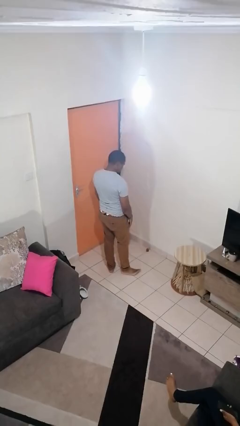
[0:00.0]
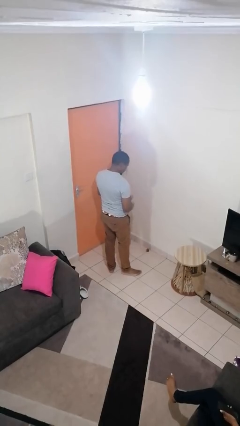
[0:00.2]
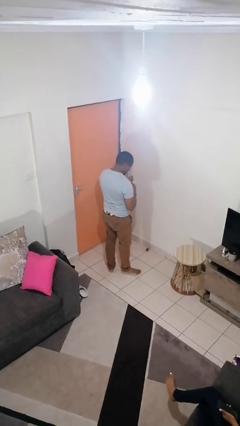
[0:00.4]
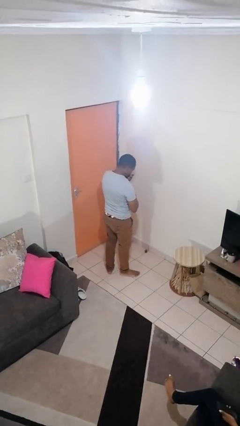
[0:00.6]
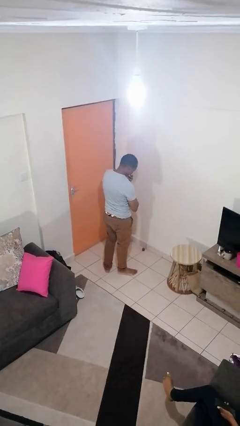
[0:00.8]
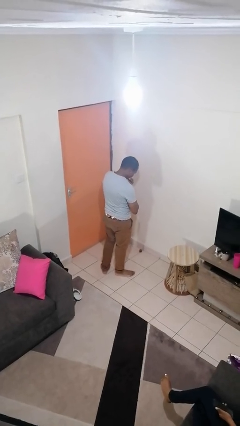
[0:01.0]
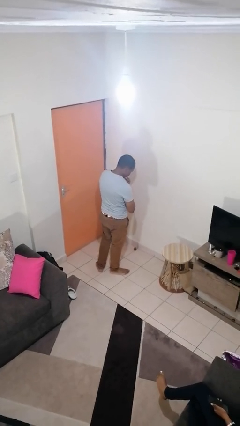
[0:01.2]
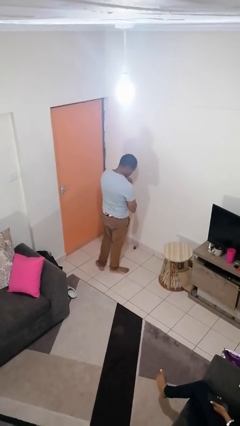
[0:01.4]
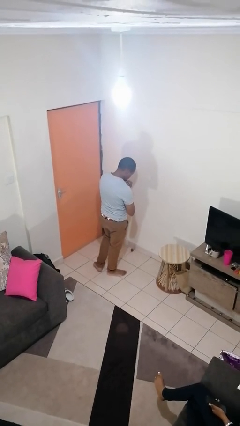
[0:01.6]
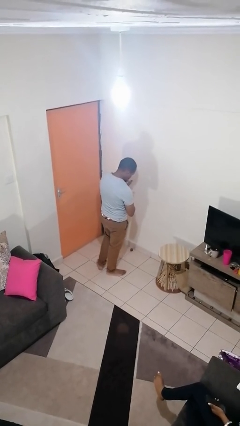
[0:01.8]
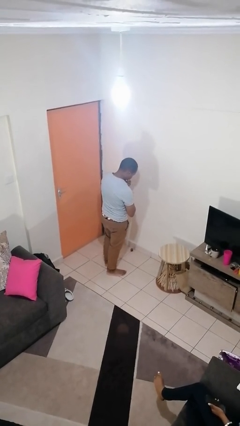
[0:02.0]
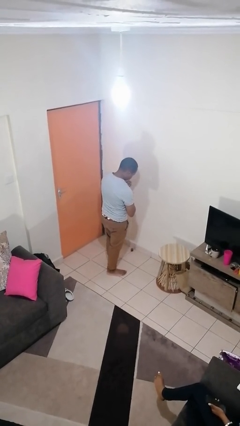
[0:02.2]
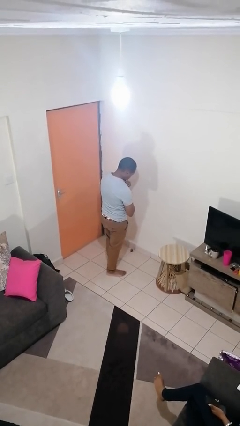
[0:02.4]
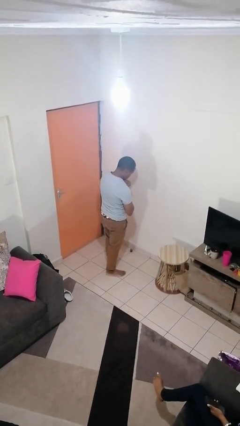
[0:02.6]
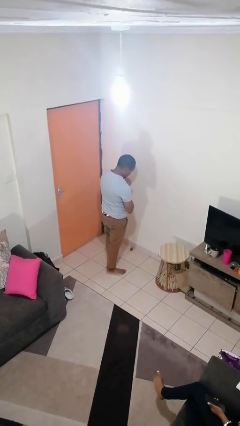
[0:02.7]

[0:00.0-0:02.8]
person strokes chin

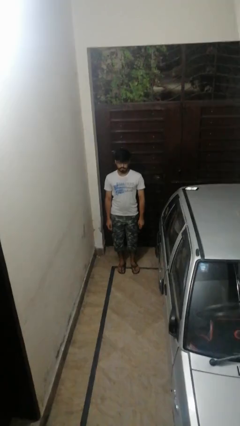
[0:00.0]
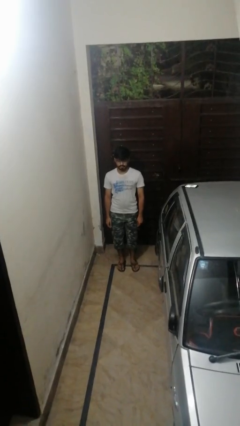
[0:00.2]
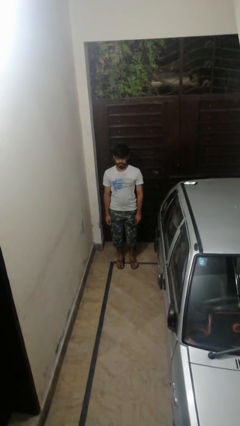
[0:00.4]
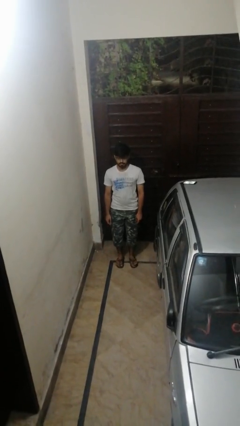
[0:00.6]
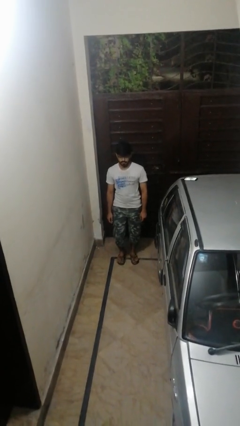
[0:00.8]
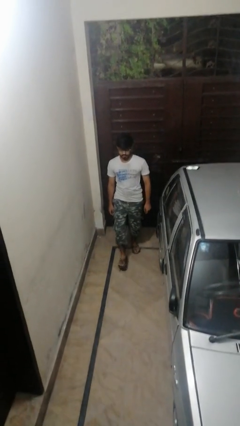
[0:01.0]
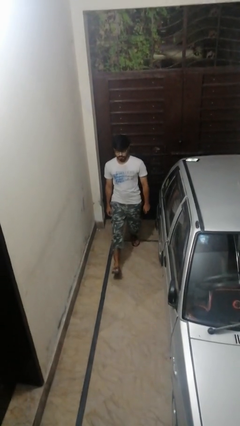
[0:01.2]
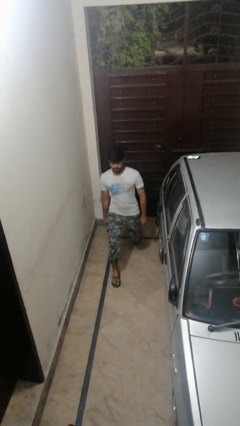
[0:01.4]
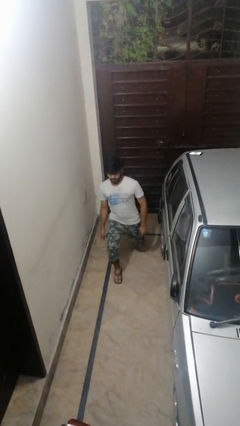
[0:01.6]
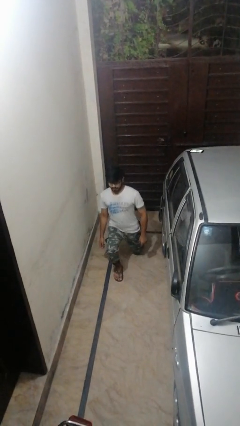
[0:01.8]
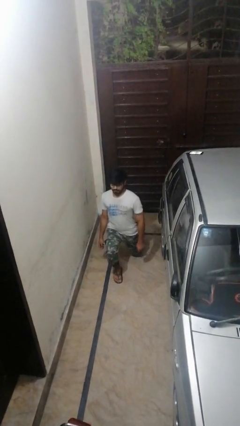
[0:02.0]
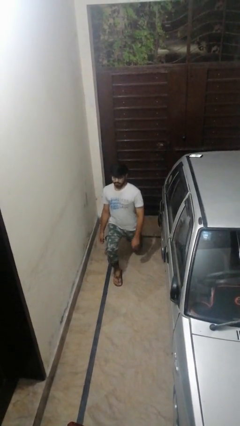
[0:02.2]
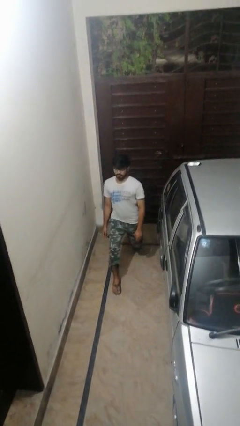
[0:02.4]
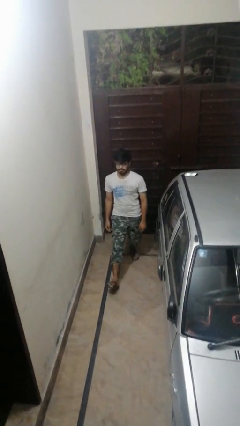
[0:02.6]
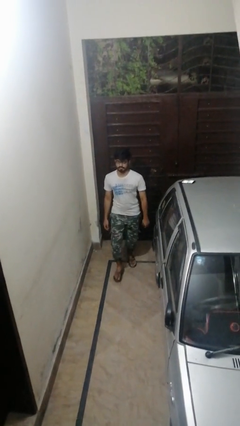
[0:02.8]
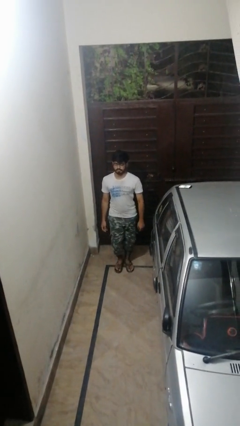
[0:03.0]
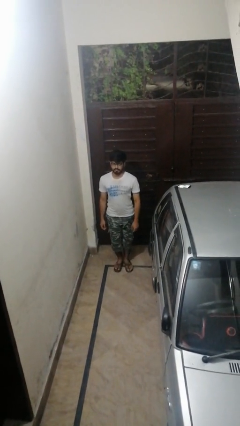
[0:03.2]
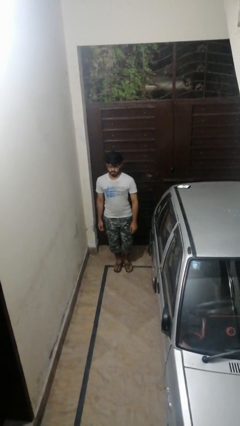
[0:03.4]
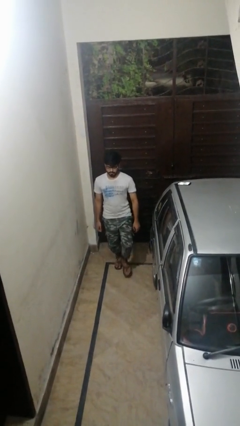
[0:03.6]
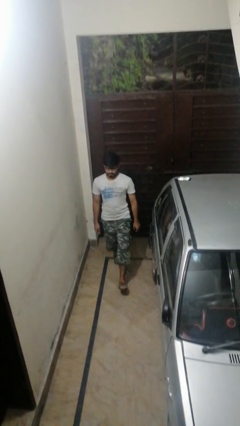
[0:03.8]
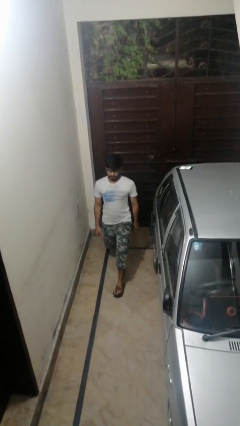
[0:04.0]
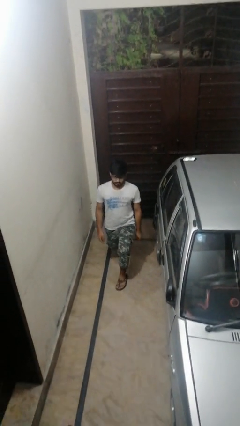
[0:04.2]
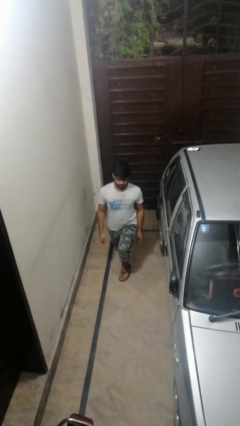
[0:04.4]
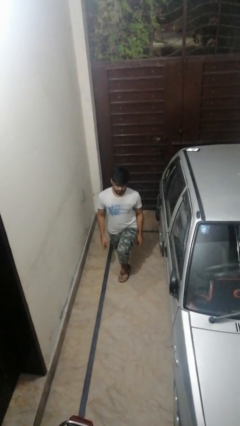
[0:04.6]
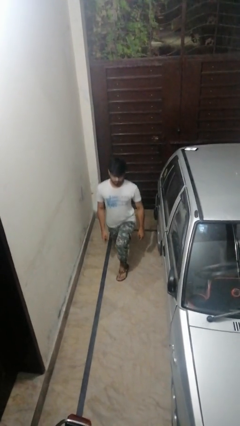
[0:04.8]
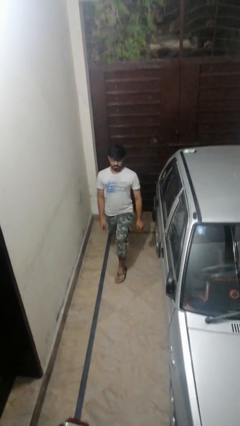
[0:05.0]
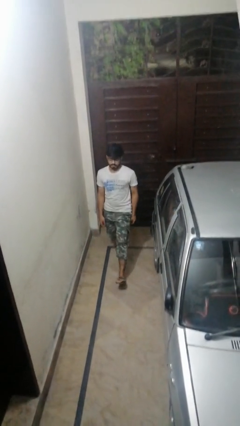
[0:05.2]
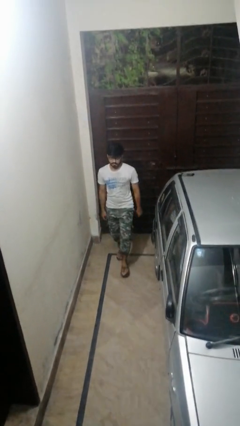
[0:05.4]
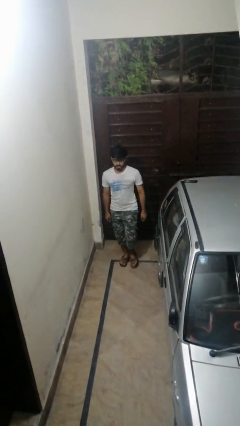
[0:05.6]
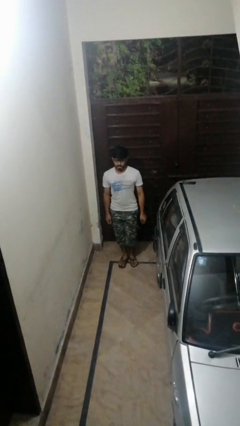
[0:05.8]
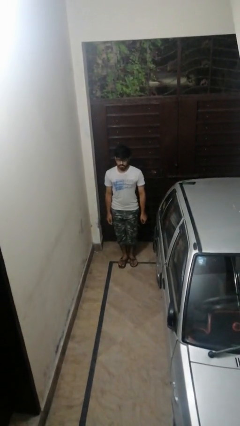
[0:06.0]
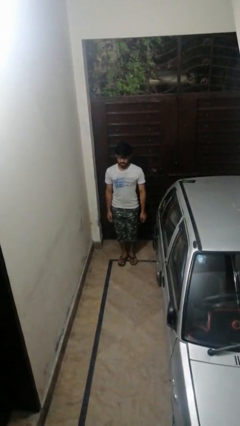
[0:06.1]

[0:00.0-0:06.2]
person exercises with lunges

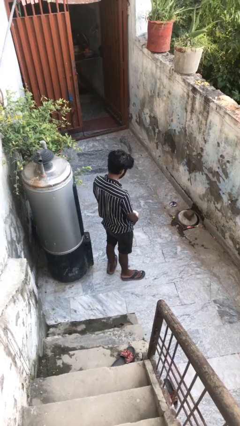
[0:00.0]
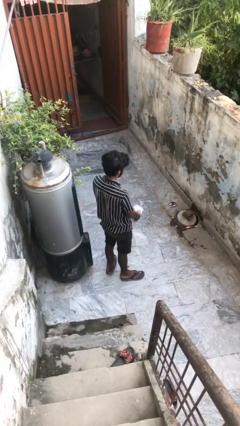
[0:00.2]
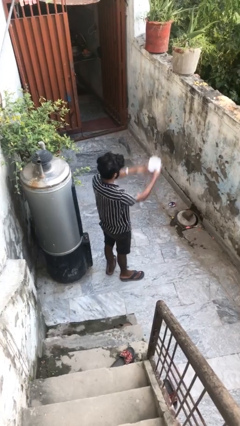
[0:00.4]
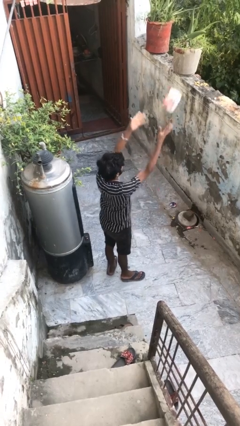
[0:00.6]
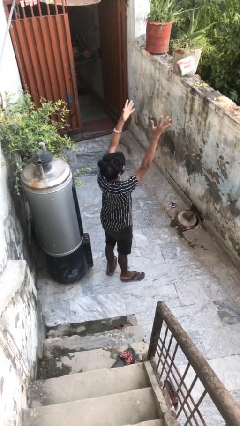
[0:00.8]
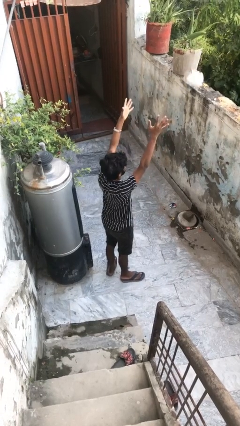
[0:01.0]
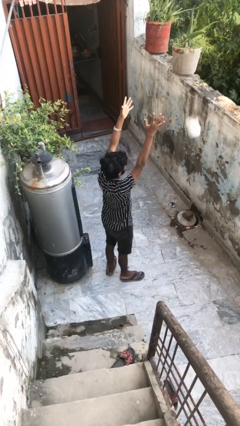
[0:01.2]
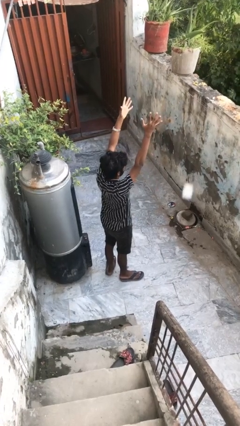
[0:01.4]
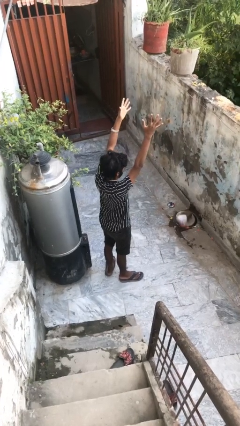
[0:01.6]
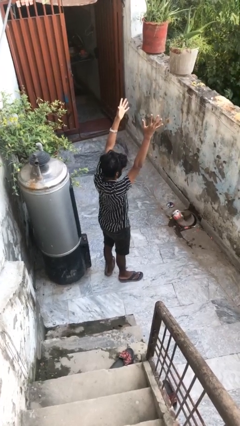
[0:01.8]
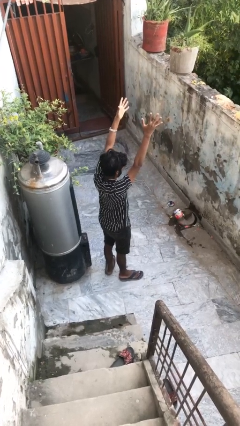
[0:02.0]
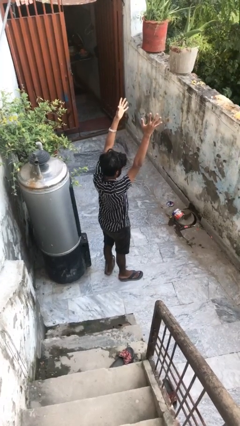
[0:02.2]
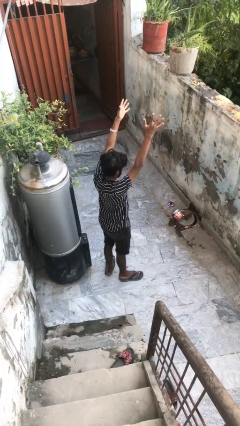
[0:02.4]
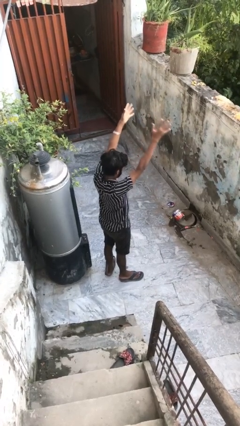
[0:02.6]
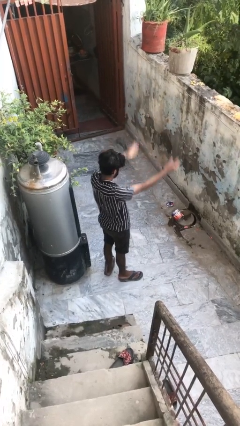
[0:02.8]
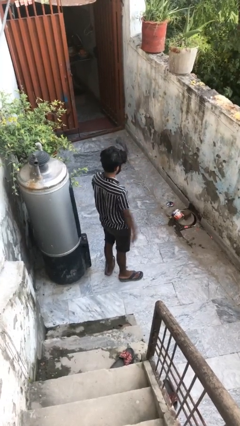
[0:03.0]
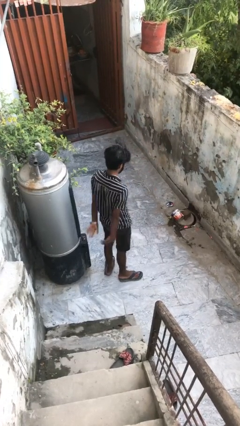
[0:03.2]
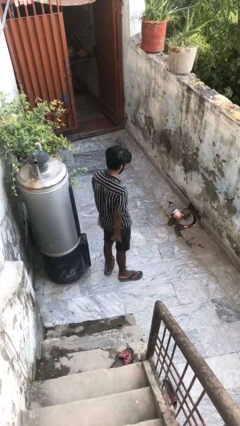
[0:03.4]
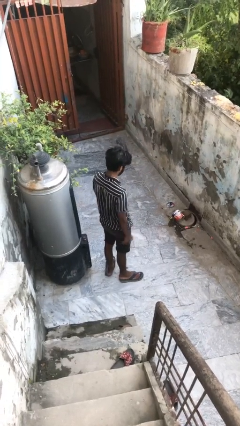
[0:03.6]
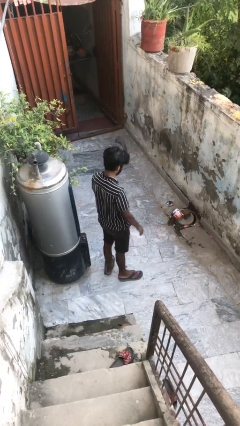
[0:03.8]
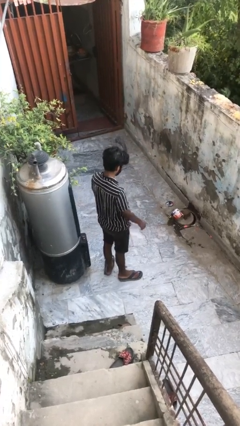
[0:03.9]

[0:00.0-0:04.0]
person throws object into air

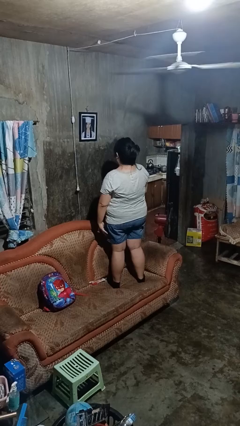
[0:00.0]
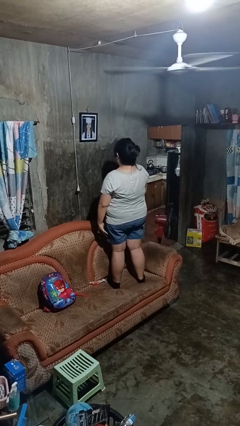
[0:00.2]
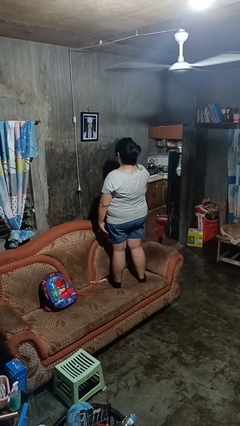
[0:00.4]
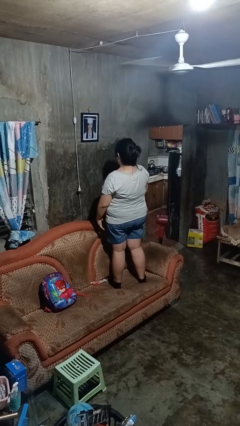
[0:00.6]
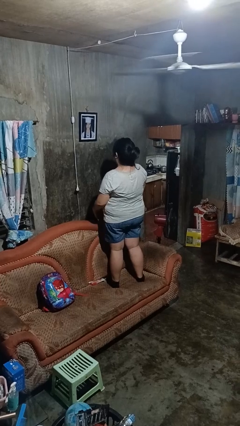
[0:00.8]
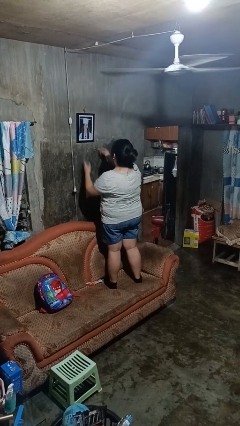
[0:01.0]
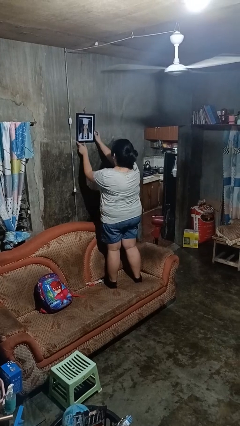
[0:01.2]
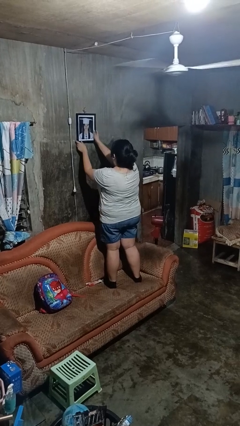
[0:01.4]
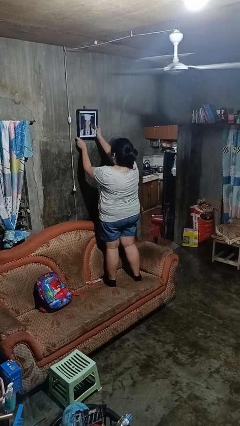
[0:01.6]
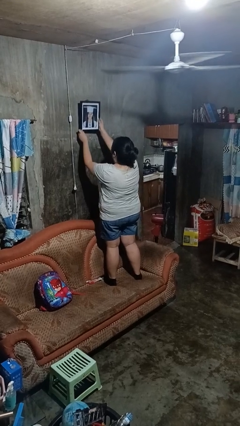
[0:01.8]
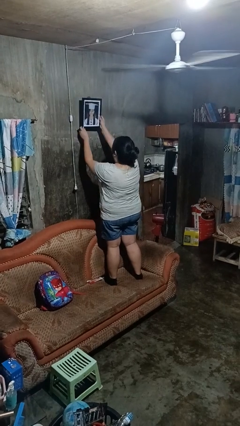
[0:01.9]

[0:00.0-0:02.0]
person takes down picture frame

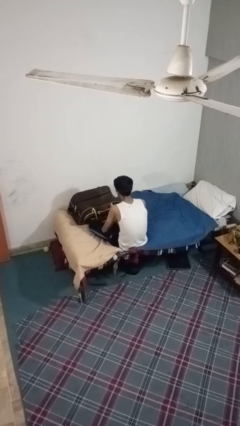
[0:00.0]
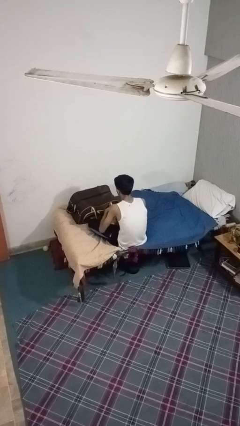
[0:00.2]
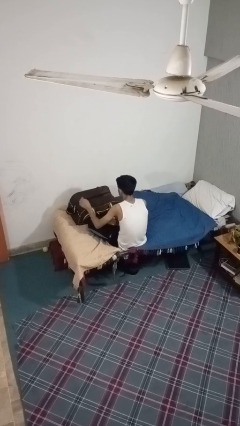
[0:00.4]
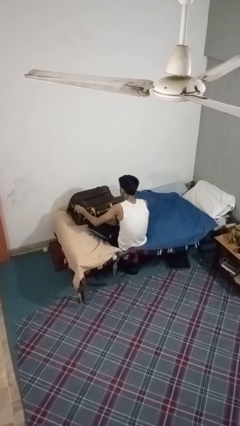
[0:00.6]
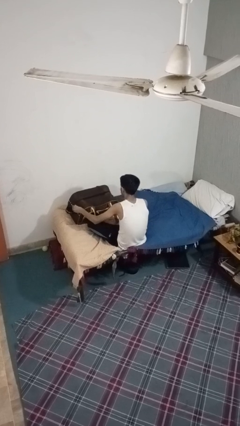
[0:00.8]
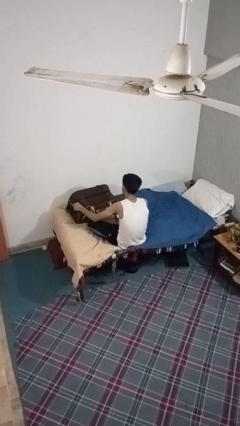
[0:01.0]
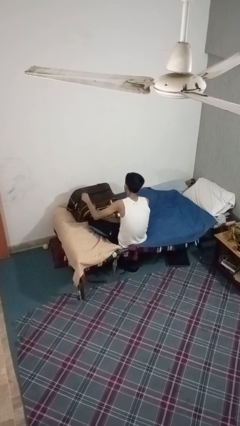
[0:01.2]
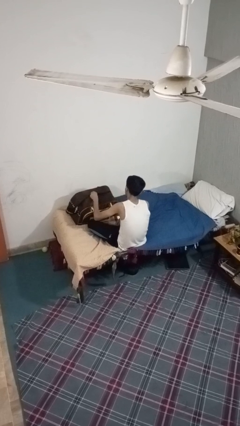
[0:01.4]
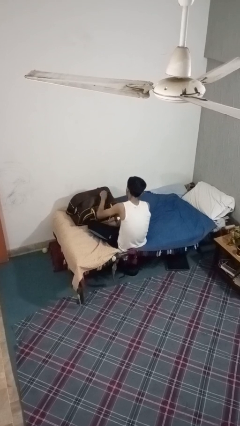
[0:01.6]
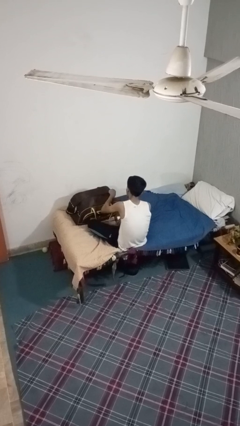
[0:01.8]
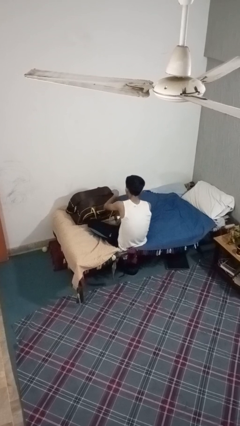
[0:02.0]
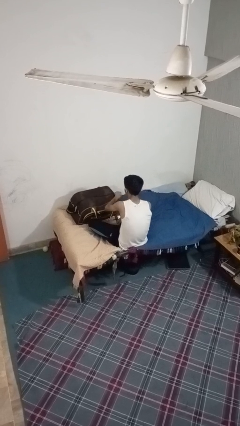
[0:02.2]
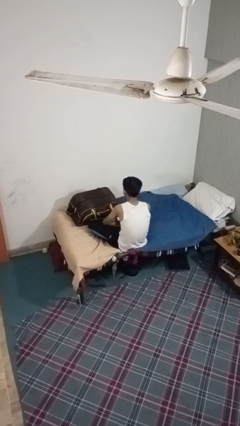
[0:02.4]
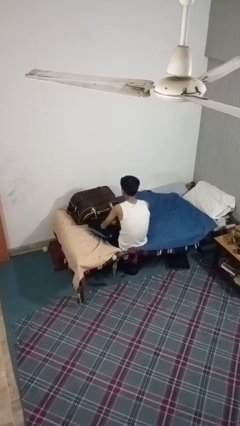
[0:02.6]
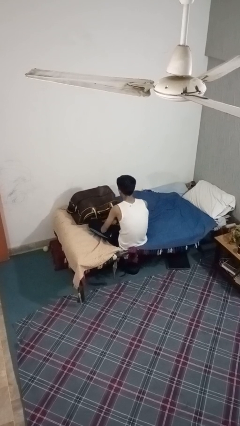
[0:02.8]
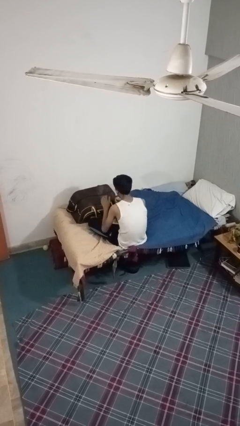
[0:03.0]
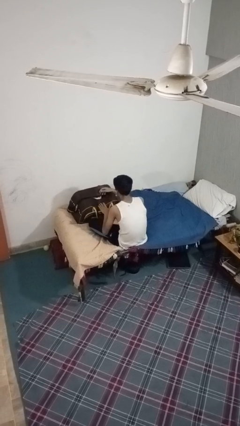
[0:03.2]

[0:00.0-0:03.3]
person opens suitcase
